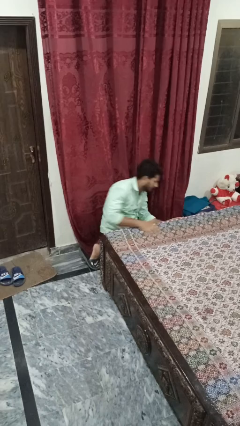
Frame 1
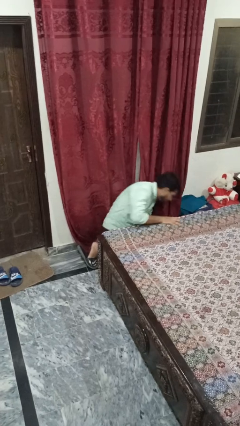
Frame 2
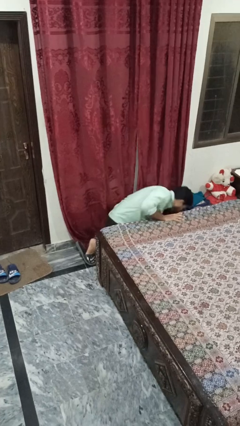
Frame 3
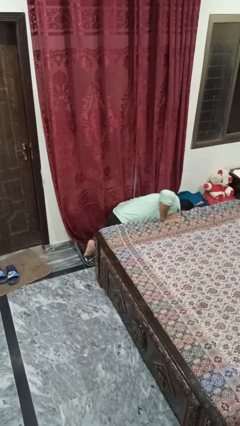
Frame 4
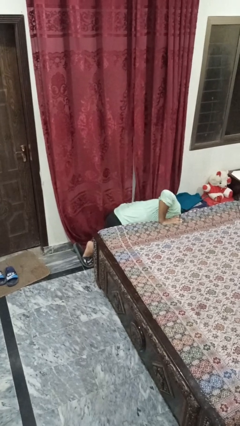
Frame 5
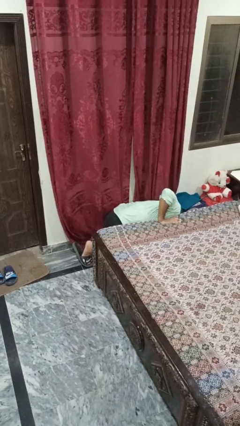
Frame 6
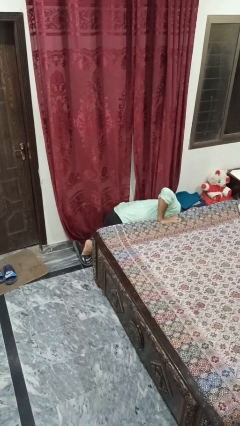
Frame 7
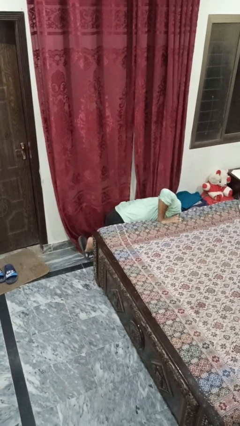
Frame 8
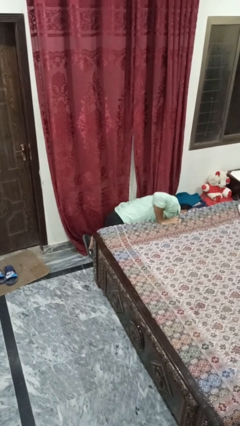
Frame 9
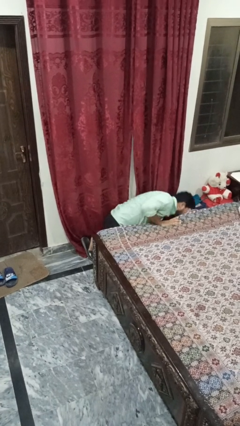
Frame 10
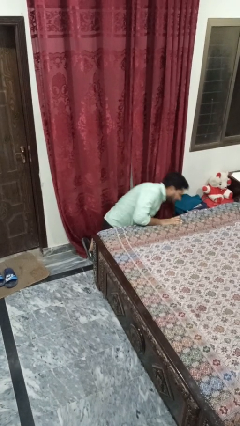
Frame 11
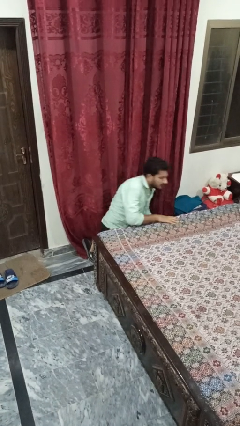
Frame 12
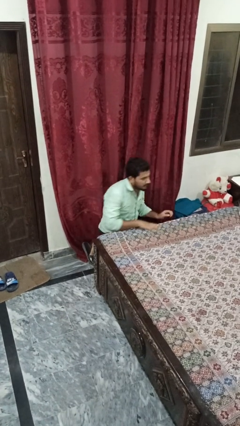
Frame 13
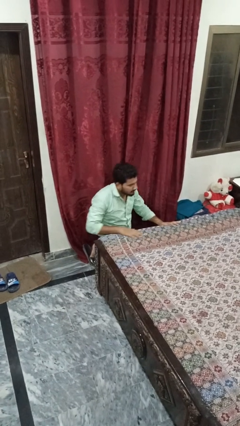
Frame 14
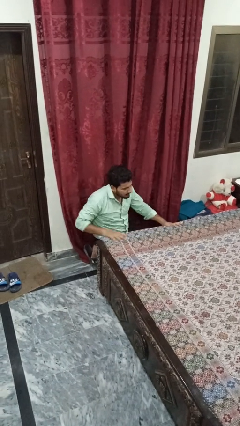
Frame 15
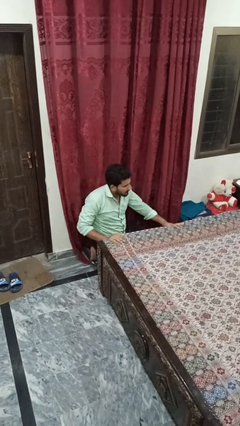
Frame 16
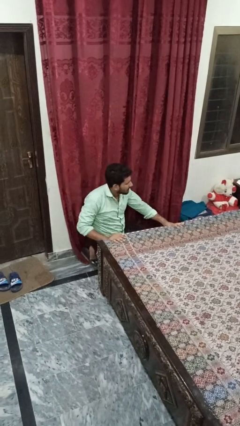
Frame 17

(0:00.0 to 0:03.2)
person searches under bed

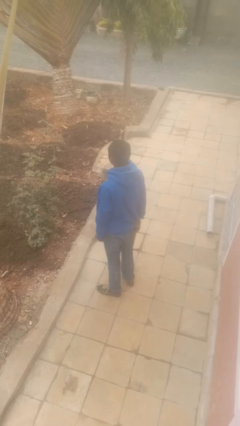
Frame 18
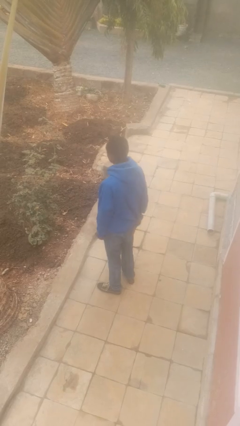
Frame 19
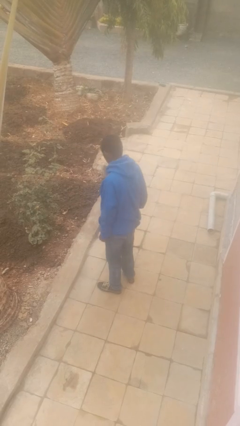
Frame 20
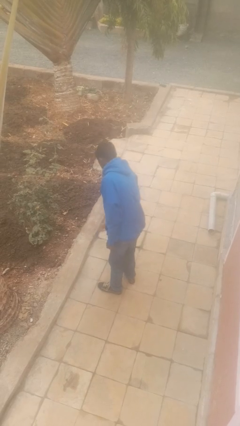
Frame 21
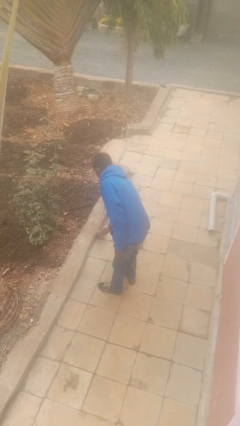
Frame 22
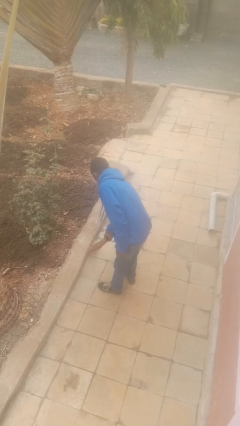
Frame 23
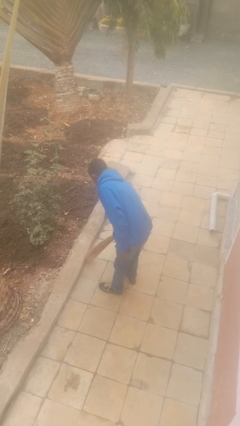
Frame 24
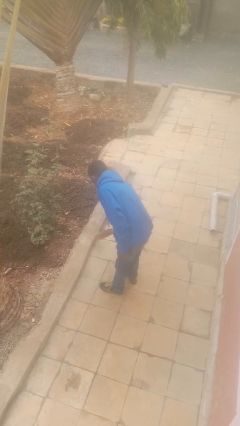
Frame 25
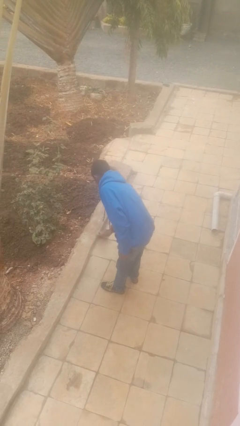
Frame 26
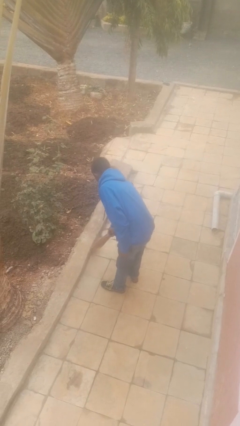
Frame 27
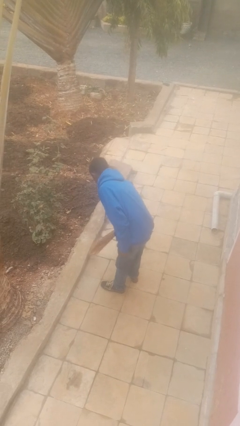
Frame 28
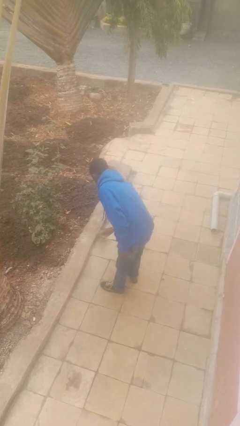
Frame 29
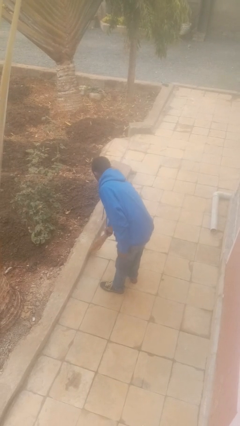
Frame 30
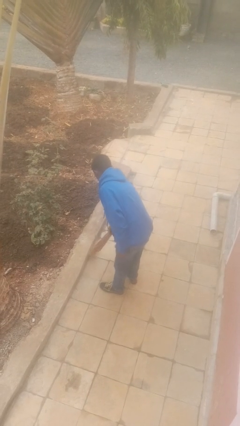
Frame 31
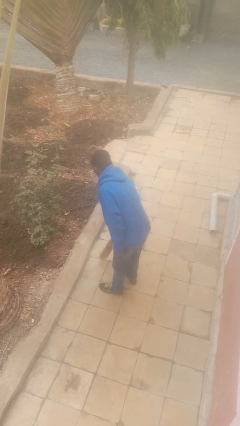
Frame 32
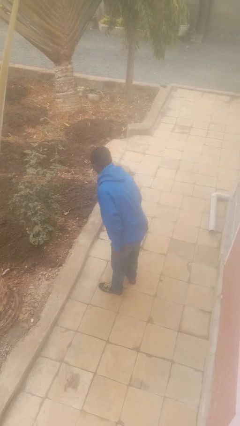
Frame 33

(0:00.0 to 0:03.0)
person sweeps floor

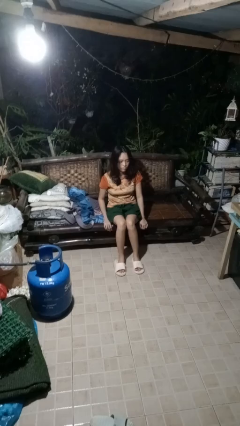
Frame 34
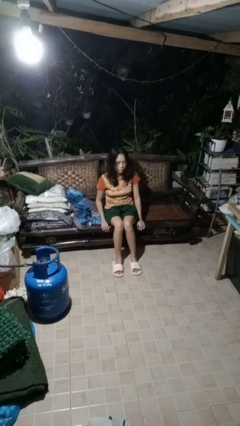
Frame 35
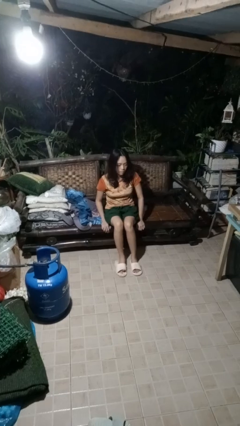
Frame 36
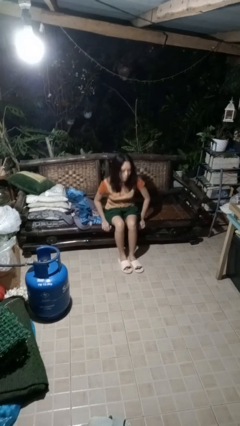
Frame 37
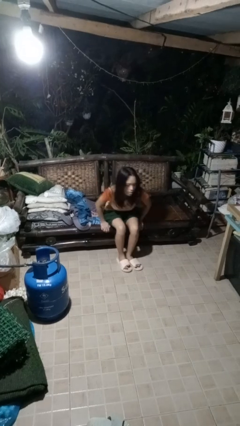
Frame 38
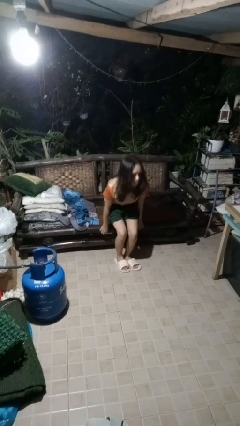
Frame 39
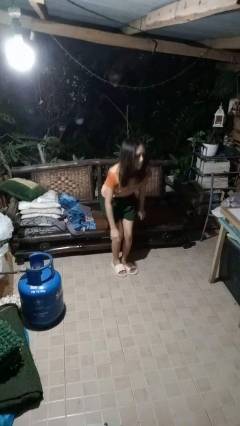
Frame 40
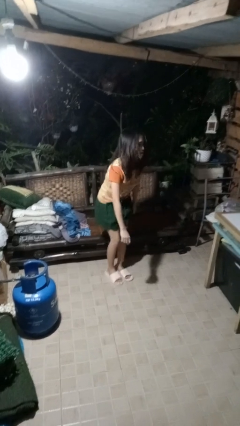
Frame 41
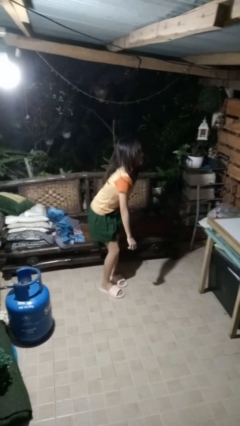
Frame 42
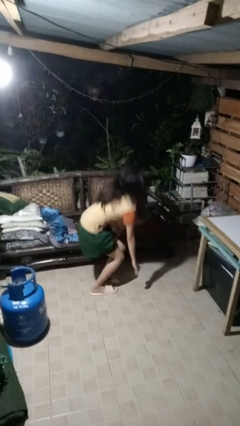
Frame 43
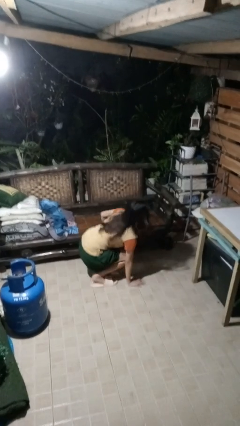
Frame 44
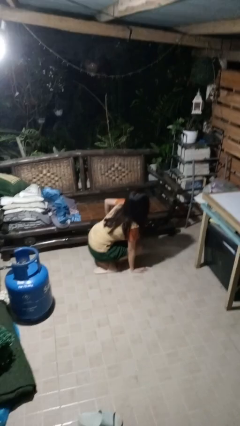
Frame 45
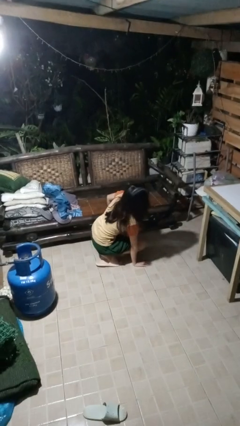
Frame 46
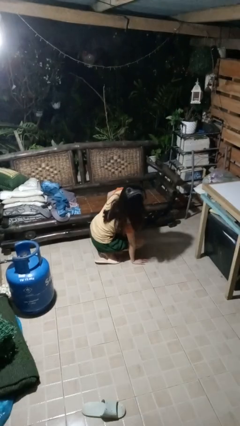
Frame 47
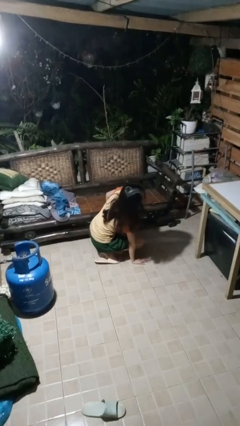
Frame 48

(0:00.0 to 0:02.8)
person falls from chair

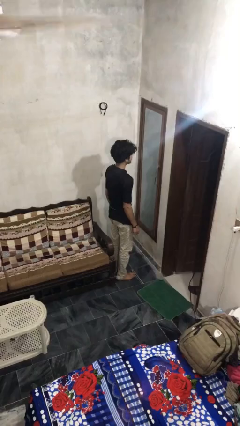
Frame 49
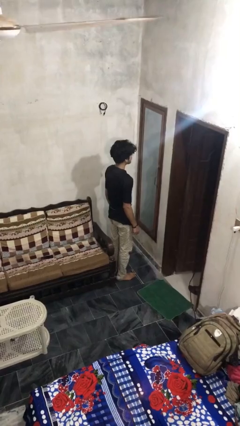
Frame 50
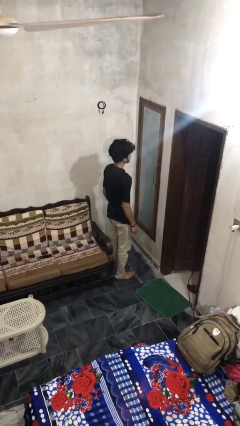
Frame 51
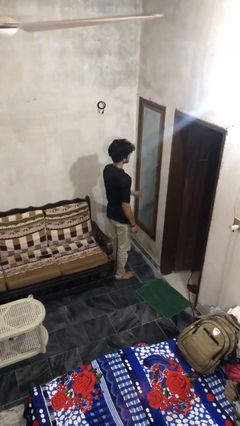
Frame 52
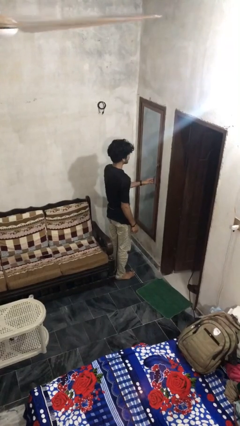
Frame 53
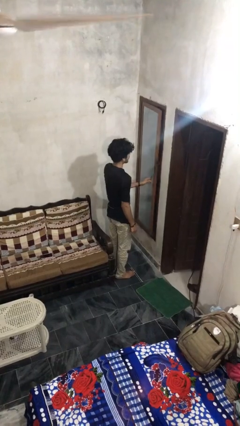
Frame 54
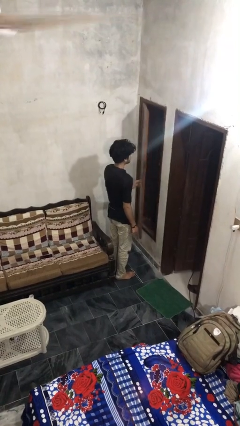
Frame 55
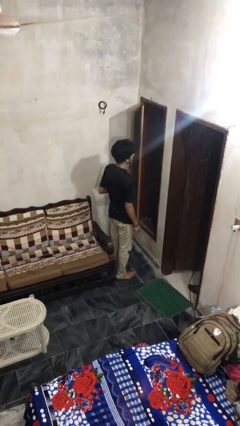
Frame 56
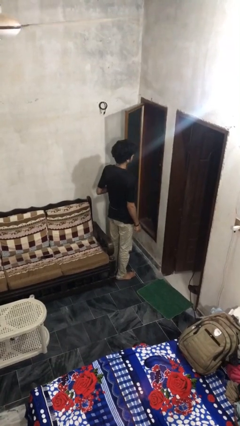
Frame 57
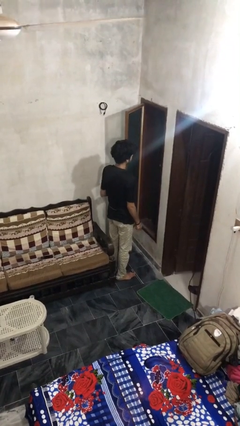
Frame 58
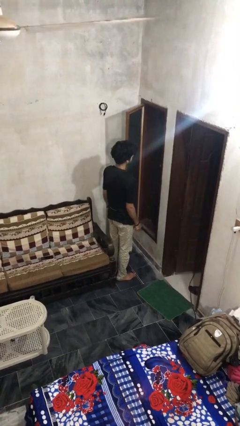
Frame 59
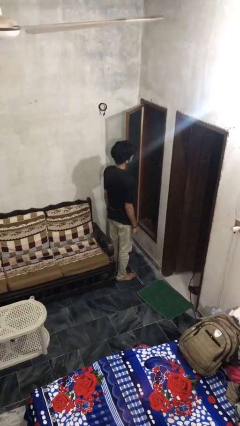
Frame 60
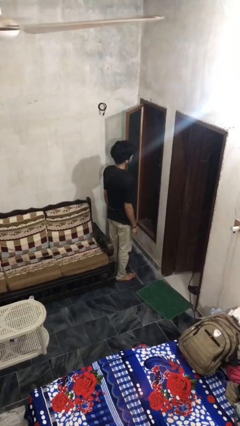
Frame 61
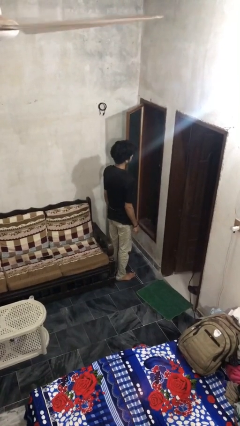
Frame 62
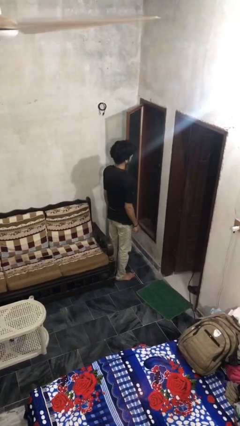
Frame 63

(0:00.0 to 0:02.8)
person opens home window

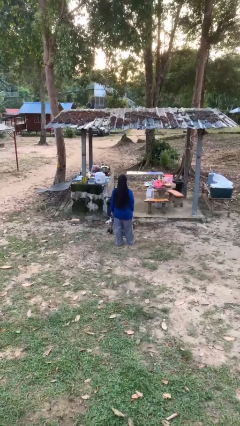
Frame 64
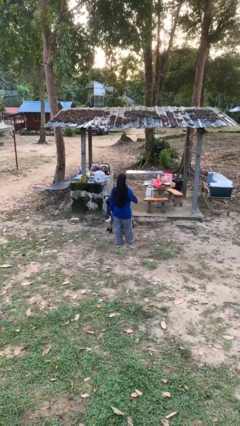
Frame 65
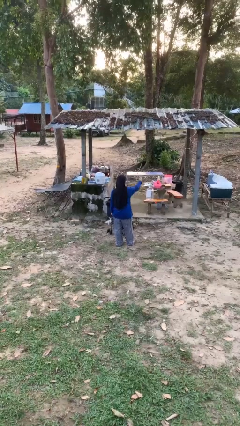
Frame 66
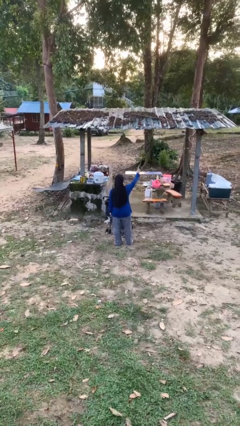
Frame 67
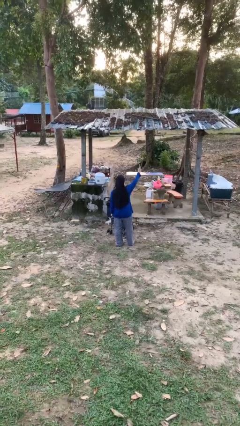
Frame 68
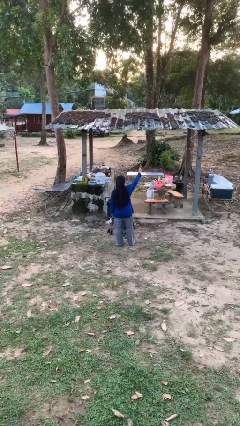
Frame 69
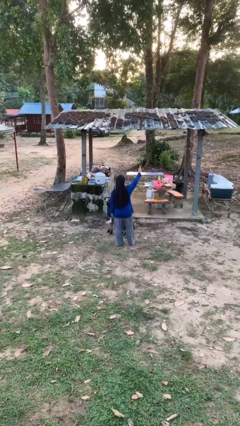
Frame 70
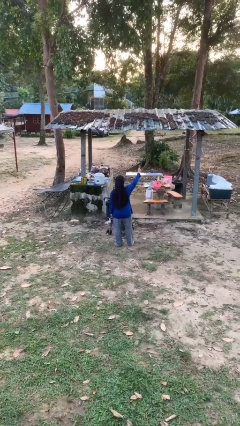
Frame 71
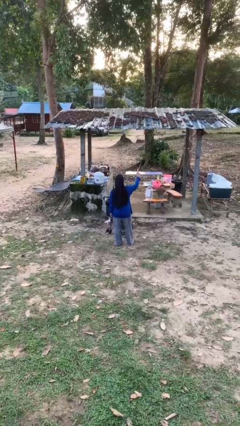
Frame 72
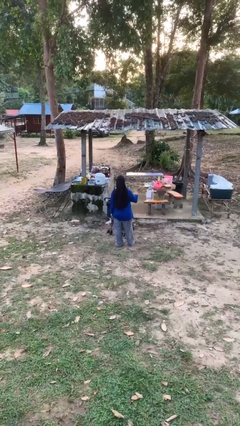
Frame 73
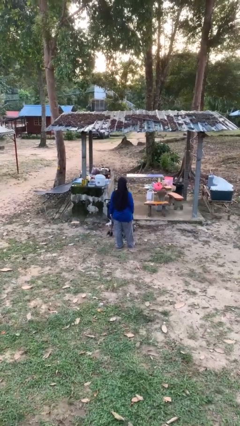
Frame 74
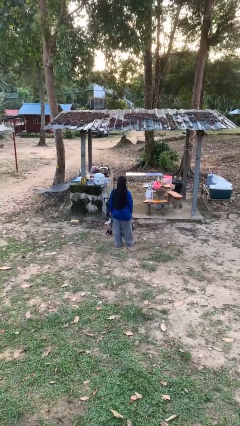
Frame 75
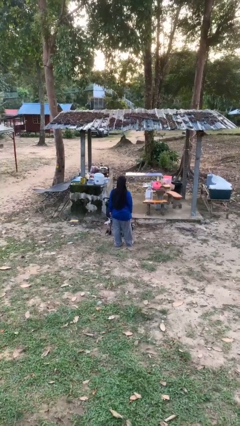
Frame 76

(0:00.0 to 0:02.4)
person gestures number one

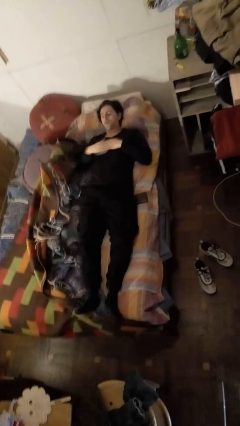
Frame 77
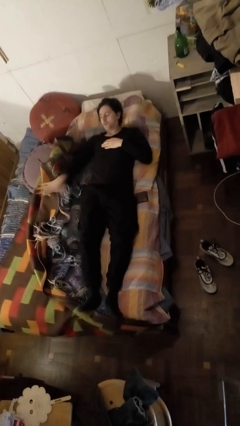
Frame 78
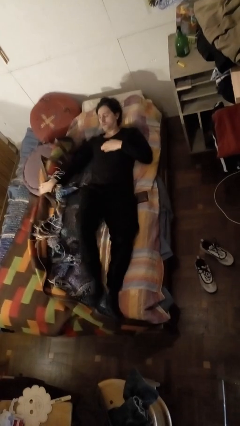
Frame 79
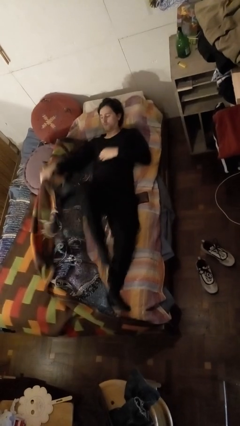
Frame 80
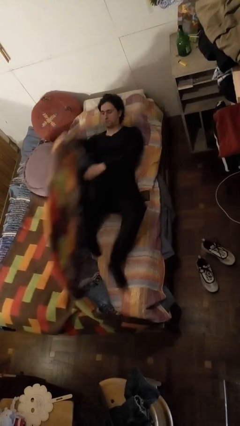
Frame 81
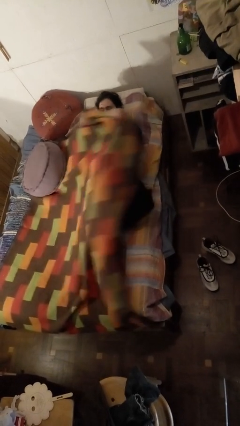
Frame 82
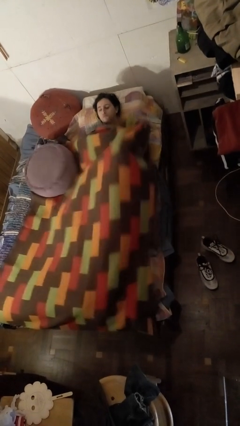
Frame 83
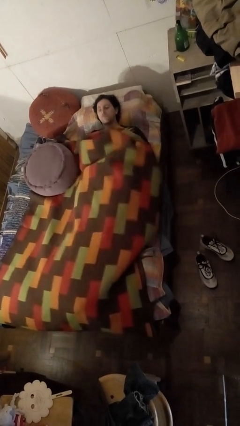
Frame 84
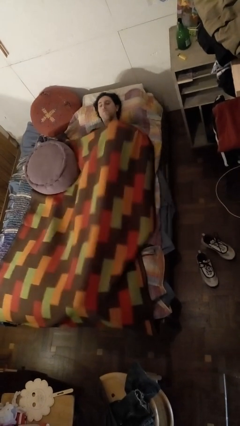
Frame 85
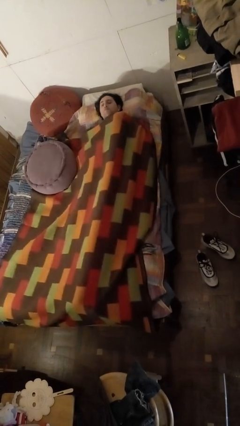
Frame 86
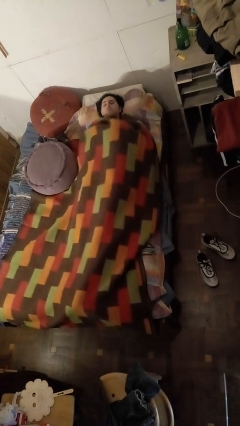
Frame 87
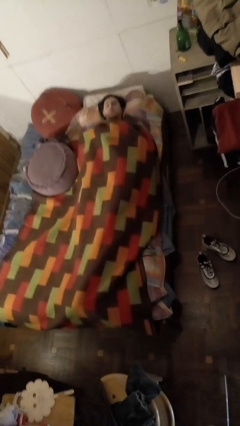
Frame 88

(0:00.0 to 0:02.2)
person covers with bedsheets

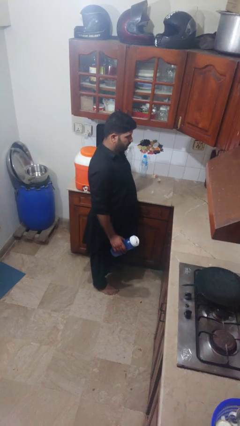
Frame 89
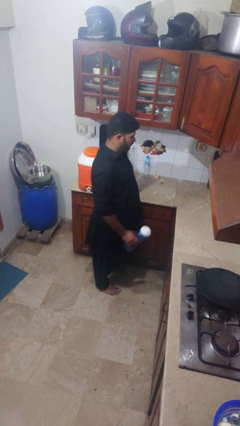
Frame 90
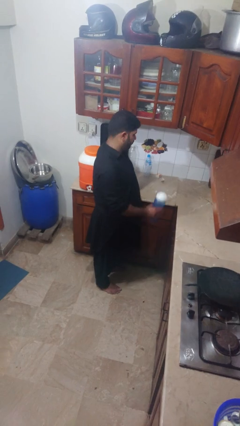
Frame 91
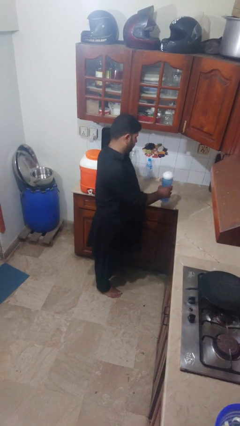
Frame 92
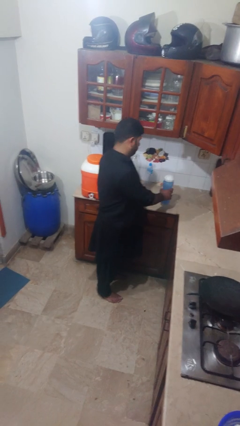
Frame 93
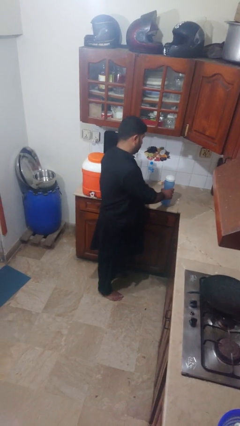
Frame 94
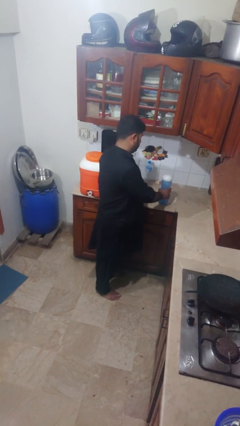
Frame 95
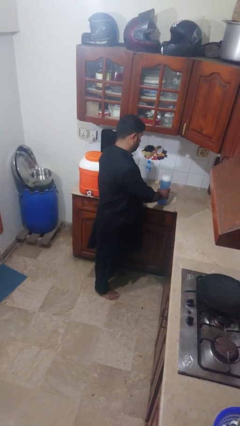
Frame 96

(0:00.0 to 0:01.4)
person puts down object on countertop
